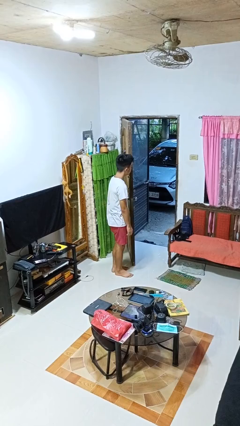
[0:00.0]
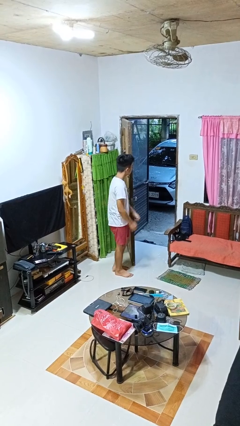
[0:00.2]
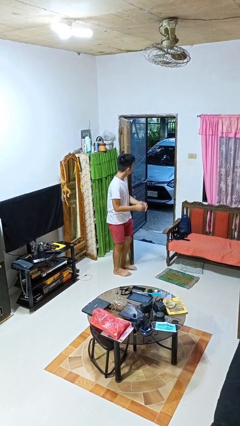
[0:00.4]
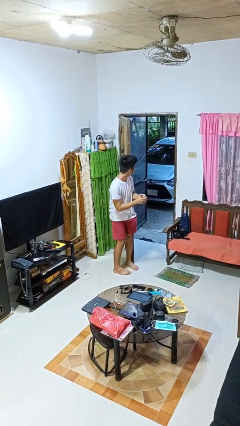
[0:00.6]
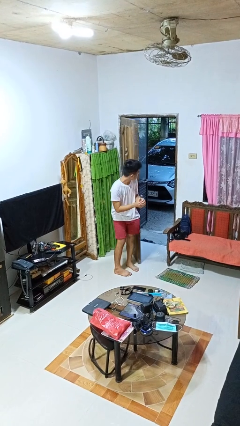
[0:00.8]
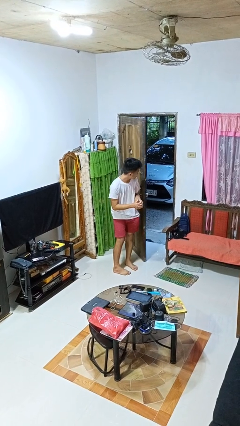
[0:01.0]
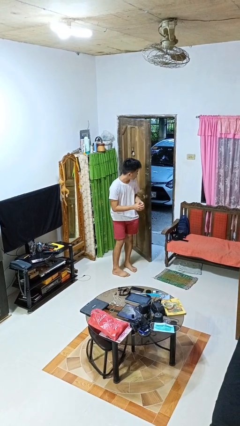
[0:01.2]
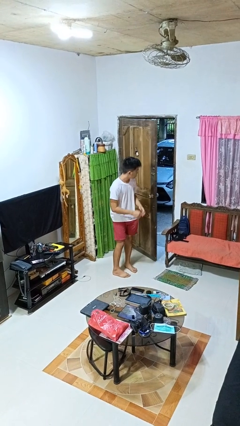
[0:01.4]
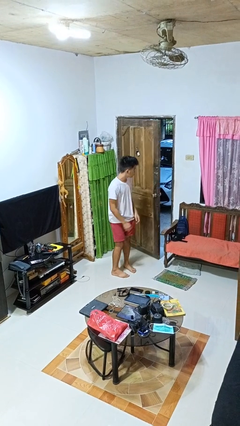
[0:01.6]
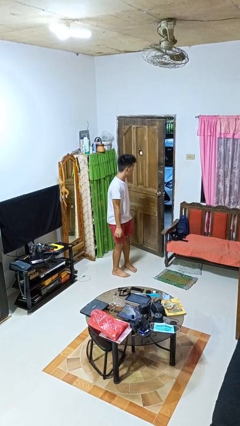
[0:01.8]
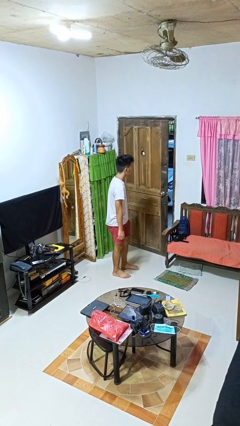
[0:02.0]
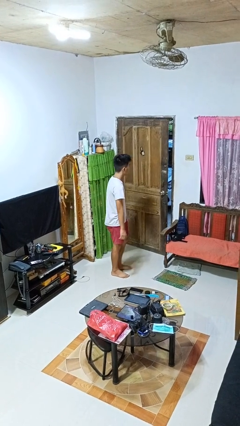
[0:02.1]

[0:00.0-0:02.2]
person closes door with hip

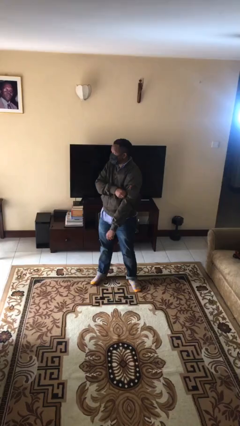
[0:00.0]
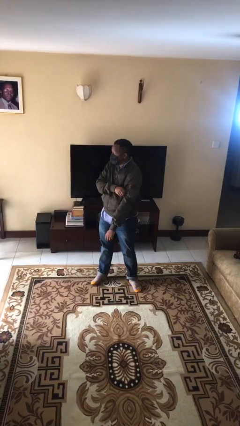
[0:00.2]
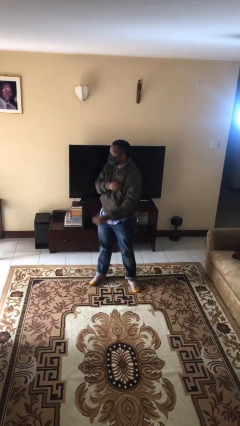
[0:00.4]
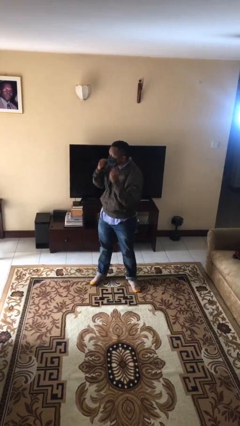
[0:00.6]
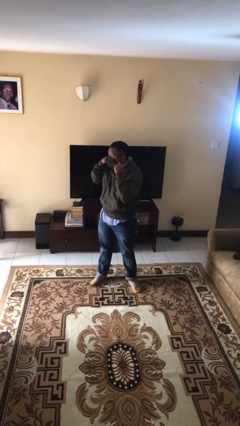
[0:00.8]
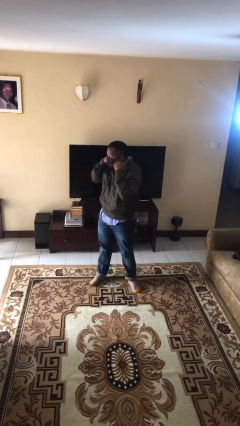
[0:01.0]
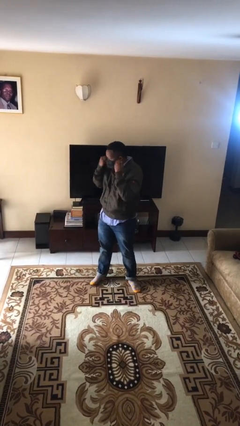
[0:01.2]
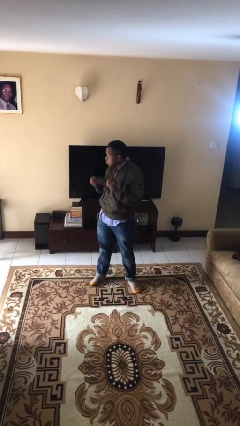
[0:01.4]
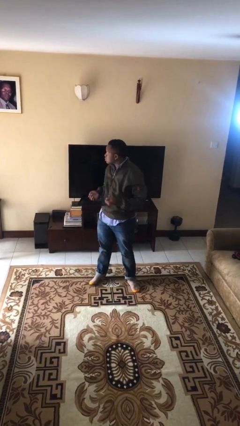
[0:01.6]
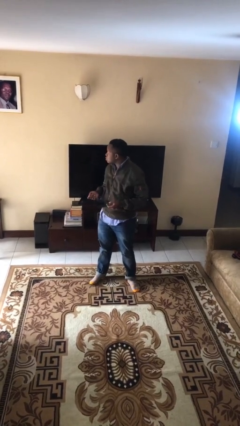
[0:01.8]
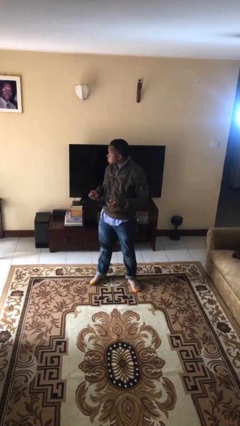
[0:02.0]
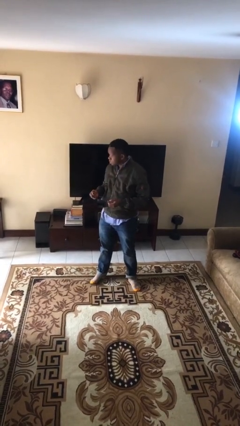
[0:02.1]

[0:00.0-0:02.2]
person takes off facemask

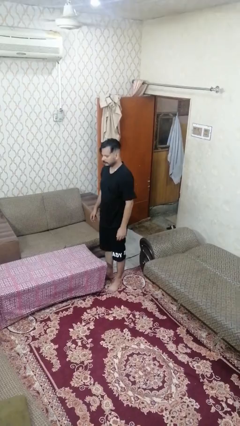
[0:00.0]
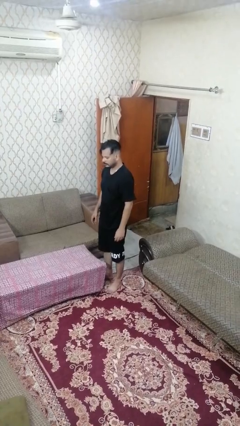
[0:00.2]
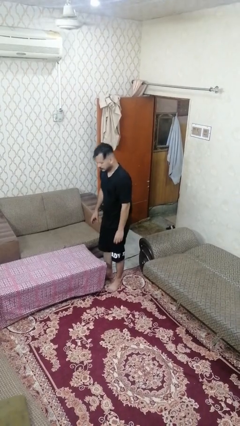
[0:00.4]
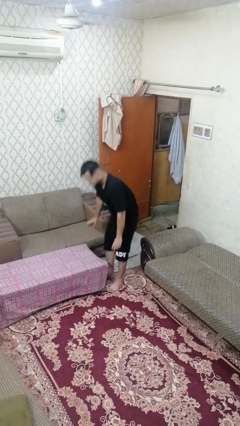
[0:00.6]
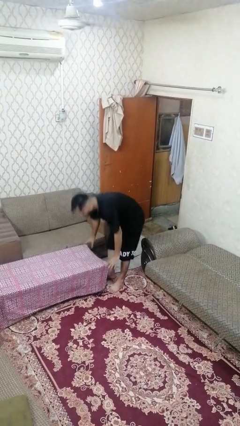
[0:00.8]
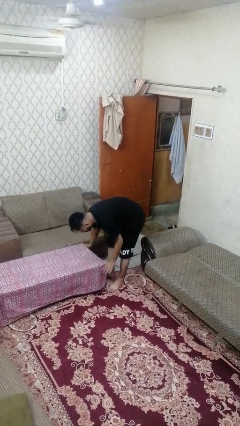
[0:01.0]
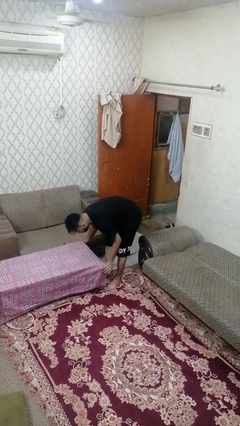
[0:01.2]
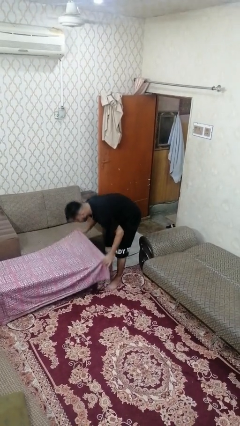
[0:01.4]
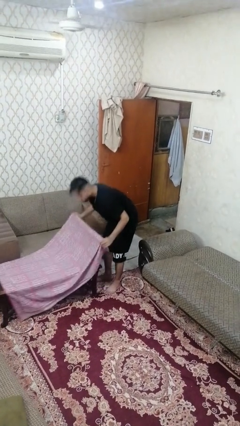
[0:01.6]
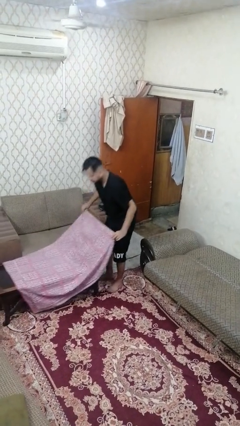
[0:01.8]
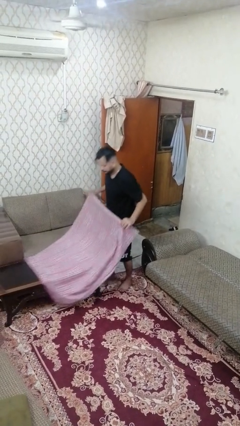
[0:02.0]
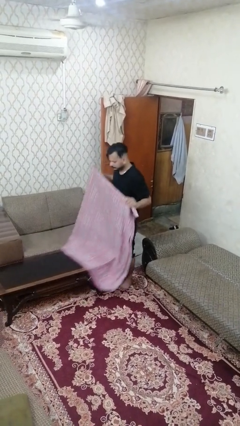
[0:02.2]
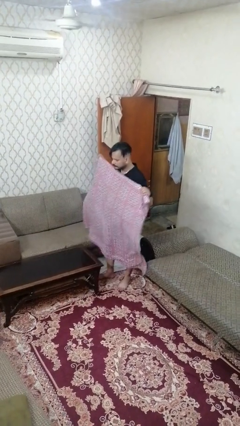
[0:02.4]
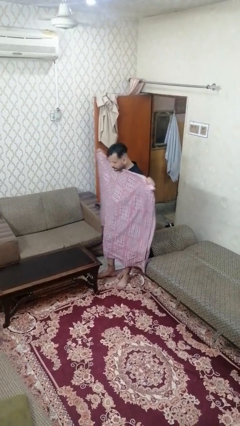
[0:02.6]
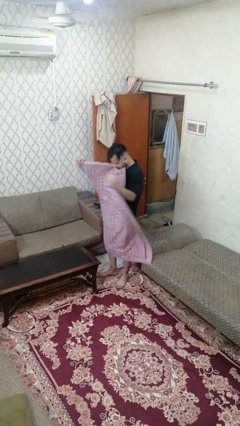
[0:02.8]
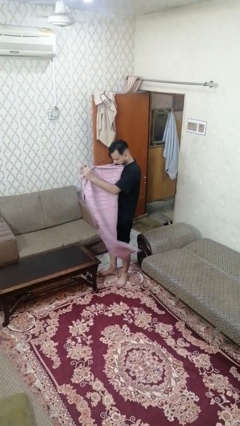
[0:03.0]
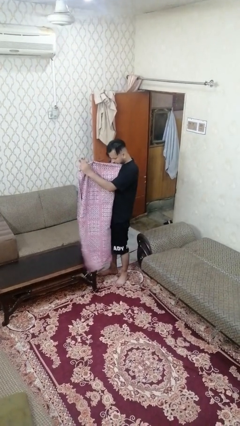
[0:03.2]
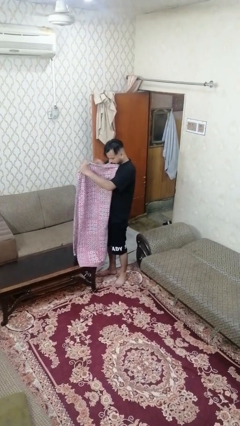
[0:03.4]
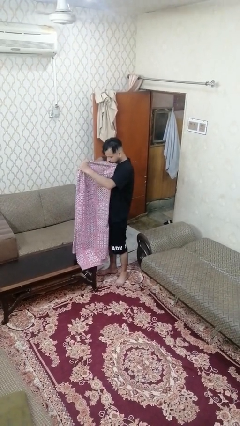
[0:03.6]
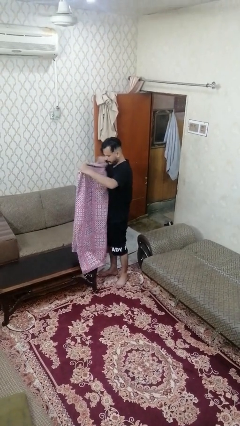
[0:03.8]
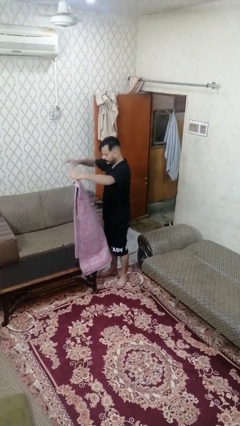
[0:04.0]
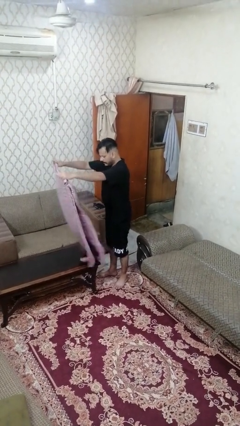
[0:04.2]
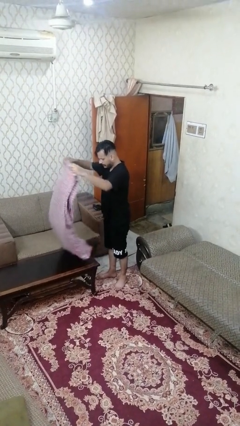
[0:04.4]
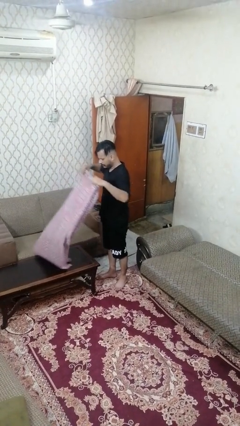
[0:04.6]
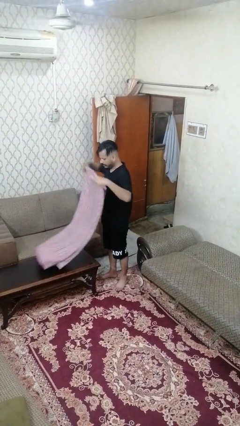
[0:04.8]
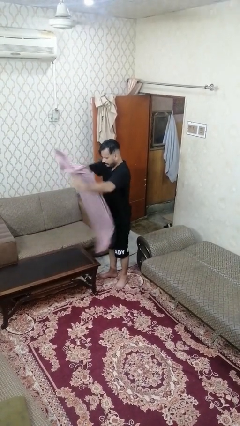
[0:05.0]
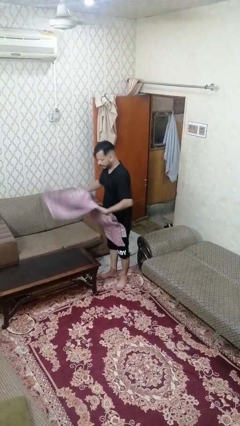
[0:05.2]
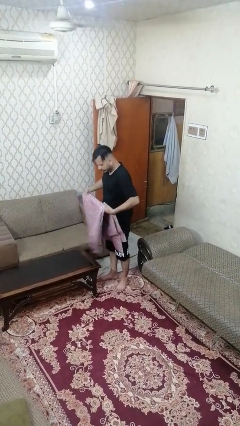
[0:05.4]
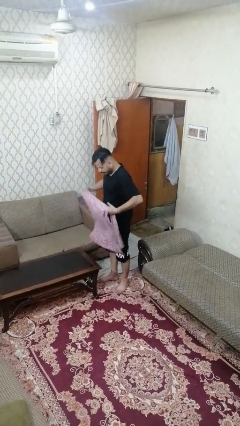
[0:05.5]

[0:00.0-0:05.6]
person folds tablecloth

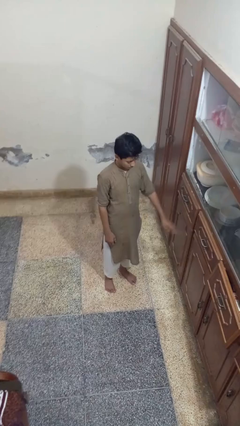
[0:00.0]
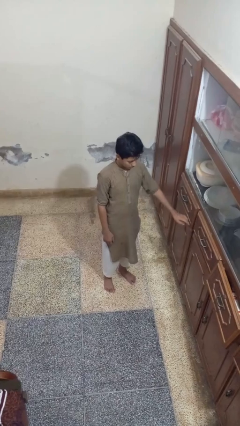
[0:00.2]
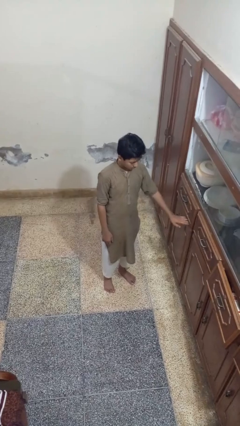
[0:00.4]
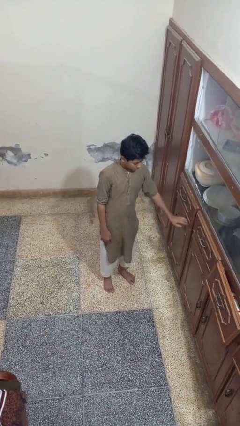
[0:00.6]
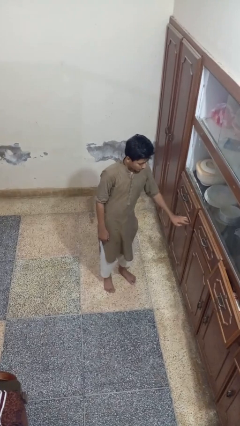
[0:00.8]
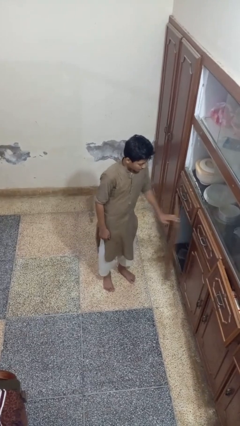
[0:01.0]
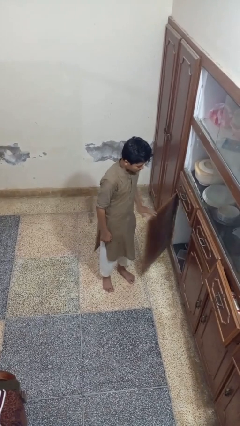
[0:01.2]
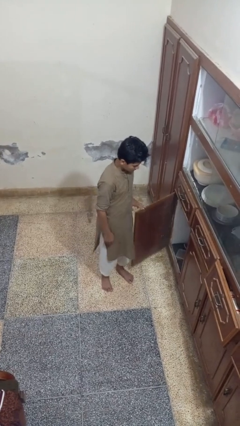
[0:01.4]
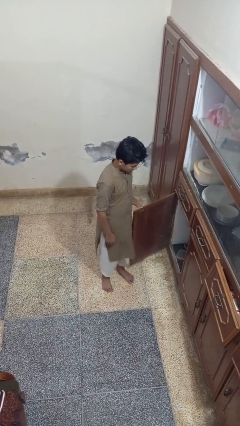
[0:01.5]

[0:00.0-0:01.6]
person opens cabinet

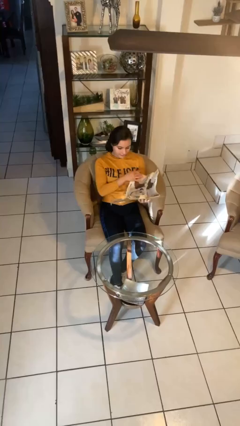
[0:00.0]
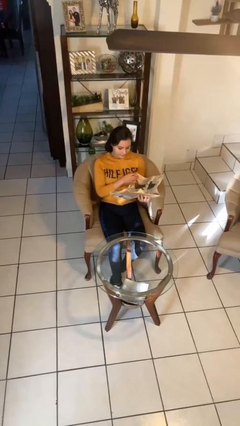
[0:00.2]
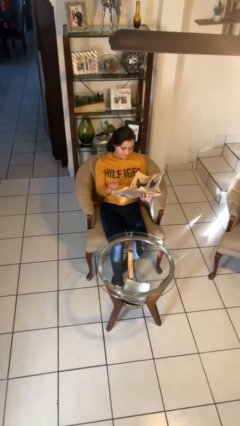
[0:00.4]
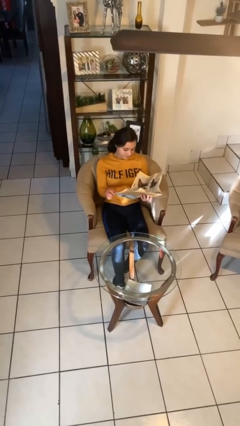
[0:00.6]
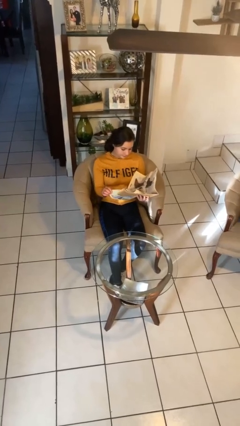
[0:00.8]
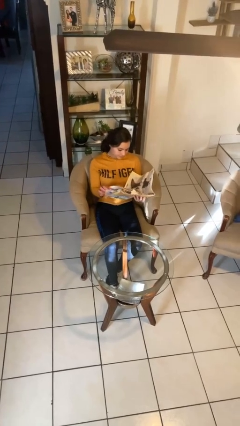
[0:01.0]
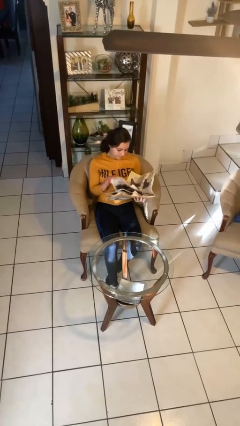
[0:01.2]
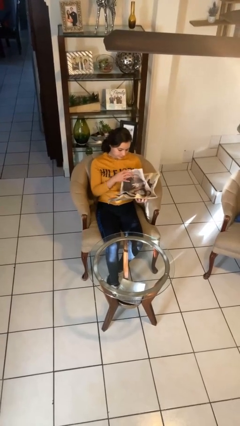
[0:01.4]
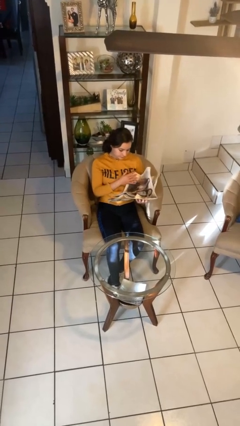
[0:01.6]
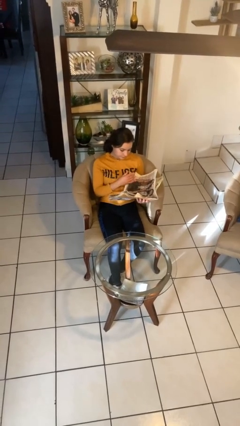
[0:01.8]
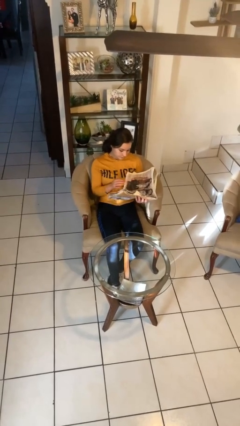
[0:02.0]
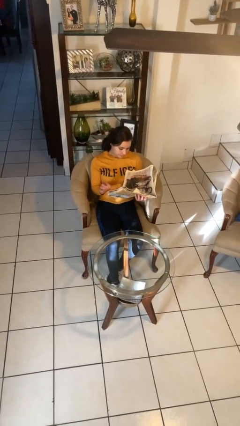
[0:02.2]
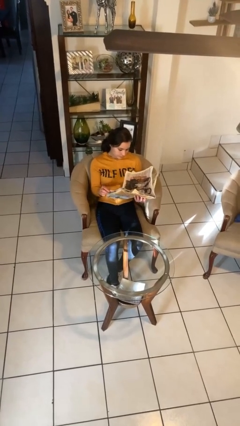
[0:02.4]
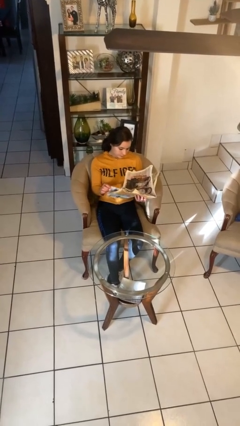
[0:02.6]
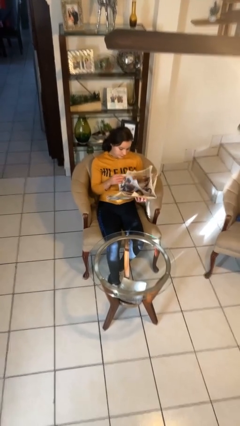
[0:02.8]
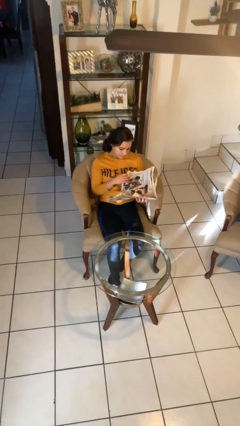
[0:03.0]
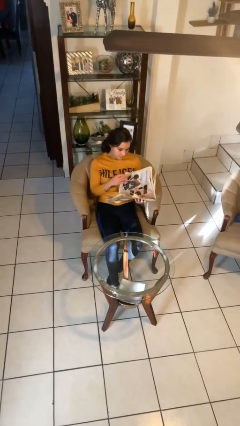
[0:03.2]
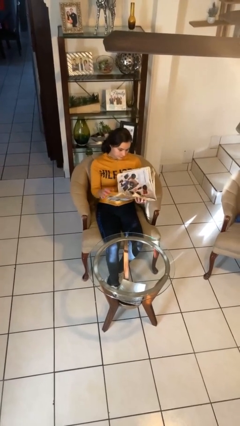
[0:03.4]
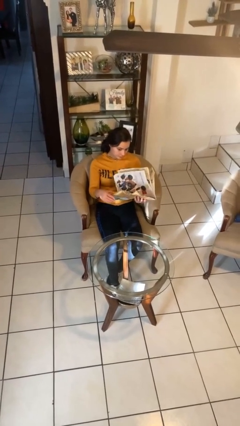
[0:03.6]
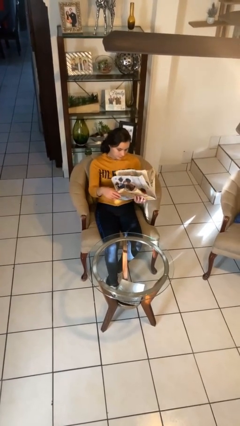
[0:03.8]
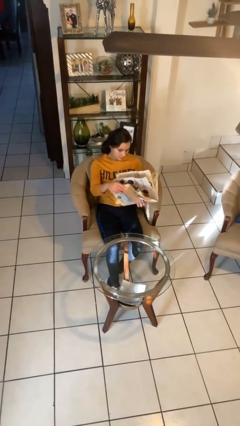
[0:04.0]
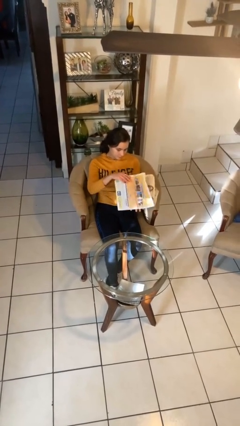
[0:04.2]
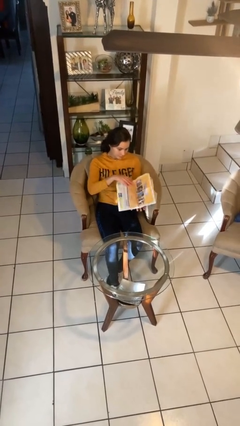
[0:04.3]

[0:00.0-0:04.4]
person reads newspaper

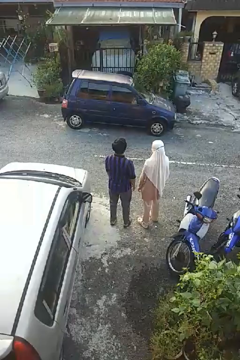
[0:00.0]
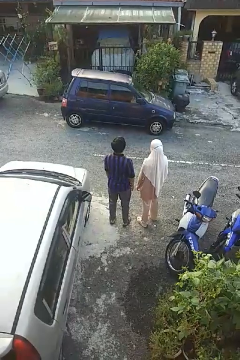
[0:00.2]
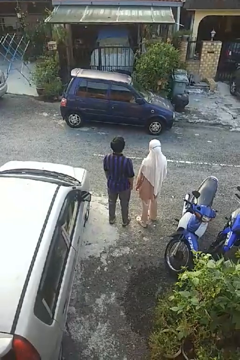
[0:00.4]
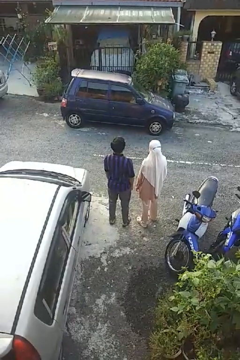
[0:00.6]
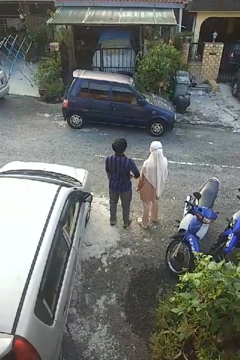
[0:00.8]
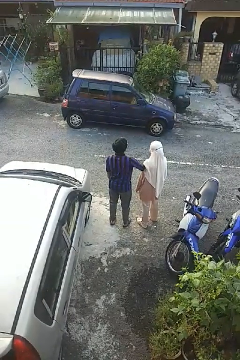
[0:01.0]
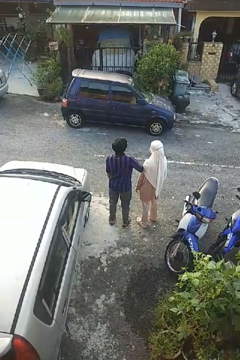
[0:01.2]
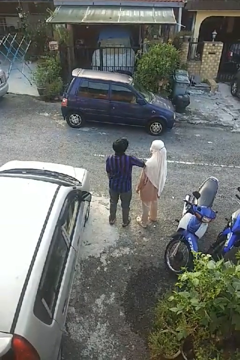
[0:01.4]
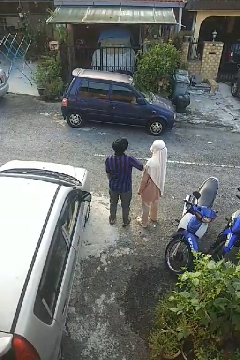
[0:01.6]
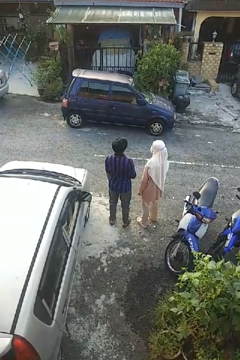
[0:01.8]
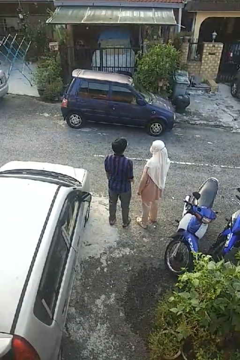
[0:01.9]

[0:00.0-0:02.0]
person nudges person with elbow
